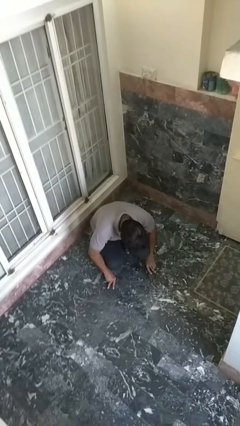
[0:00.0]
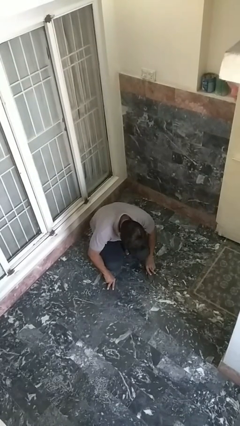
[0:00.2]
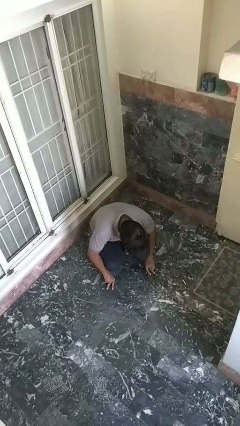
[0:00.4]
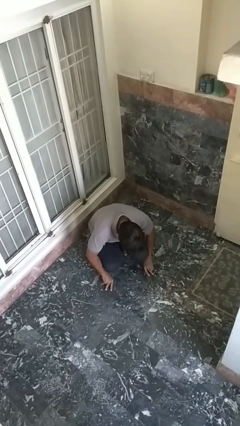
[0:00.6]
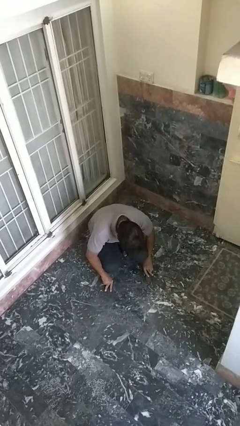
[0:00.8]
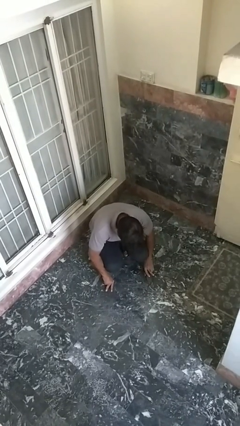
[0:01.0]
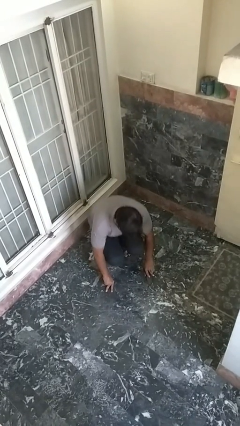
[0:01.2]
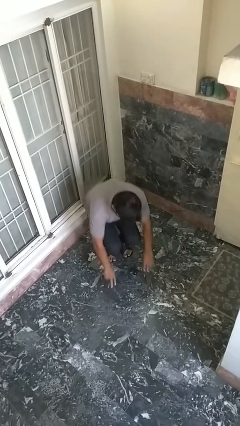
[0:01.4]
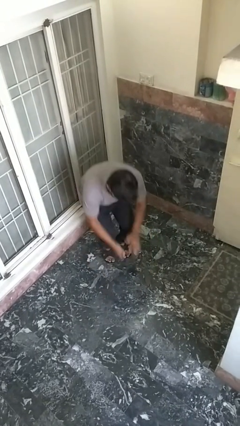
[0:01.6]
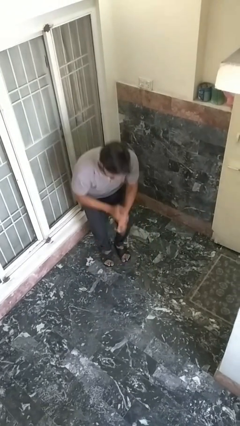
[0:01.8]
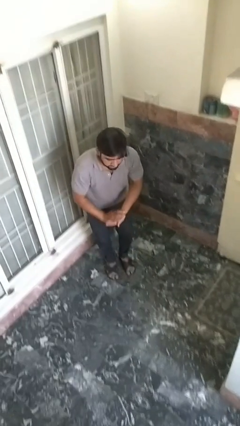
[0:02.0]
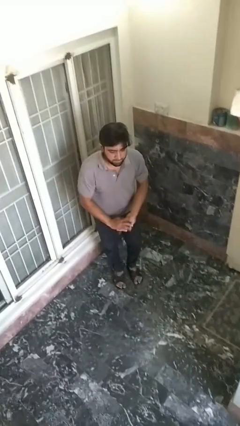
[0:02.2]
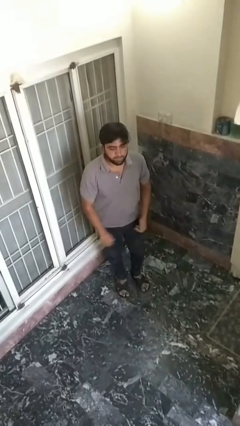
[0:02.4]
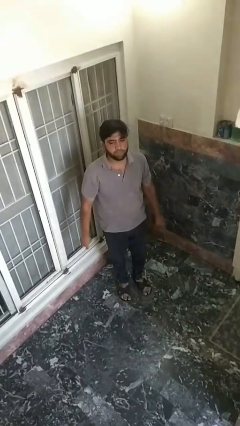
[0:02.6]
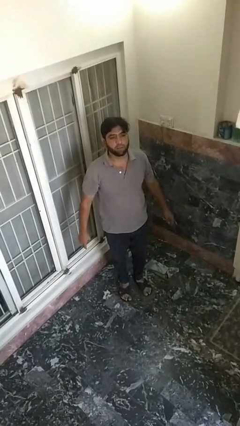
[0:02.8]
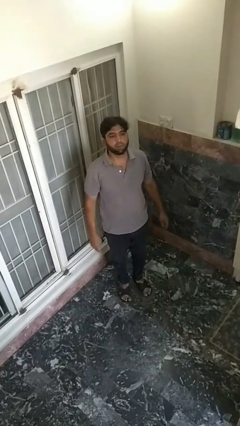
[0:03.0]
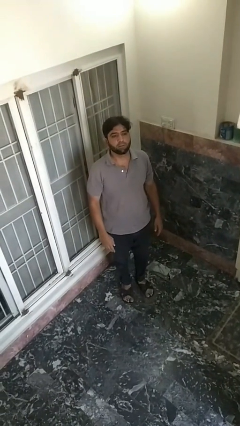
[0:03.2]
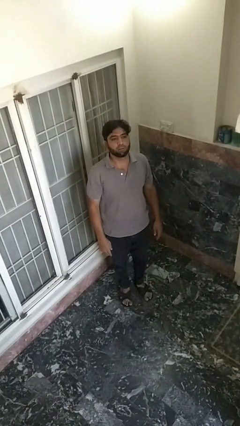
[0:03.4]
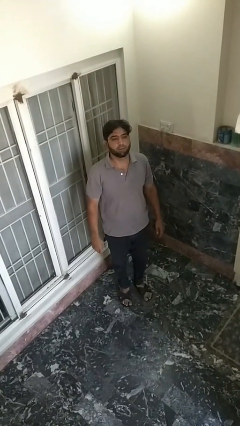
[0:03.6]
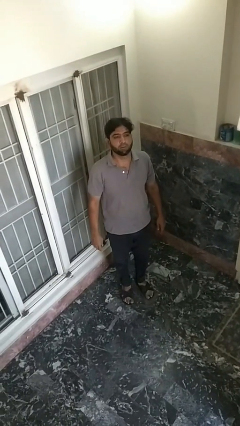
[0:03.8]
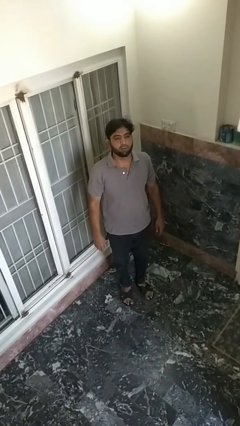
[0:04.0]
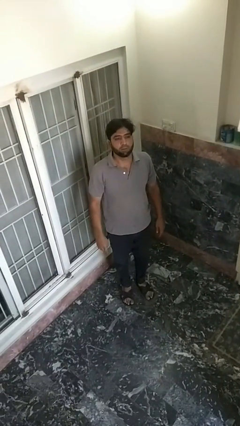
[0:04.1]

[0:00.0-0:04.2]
person stands up from floor

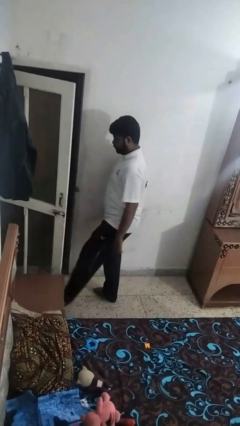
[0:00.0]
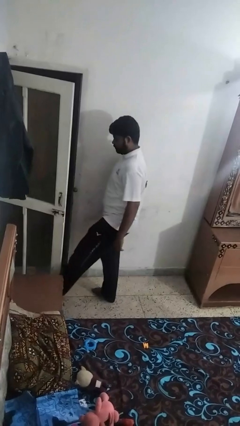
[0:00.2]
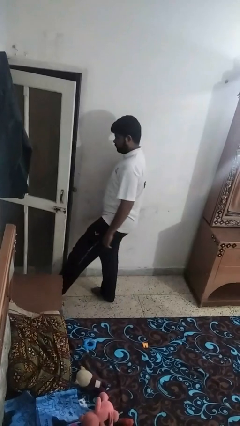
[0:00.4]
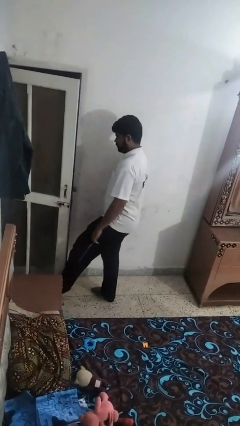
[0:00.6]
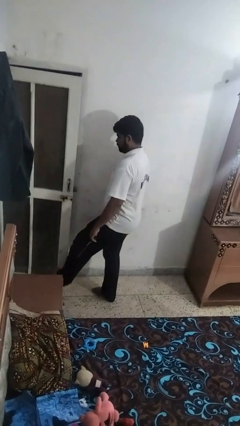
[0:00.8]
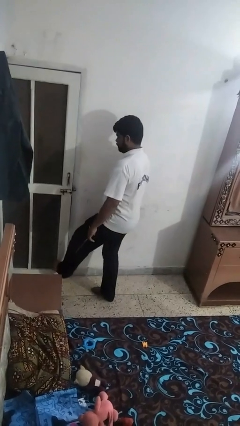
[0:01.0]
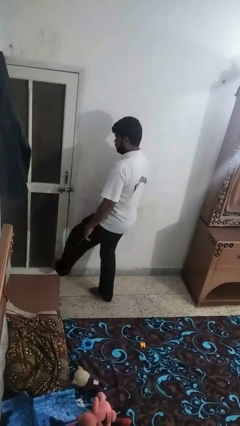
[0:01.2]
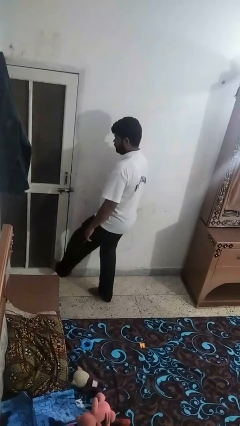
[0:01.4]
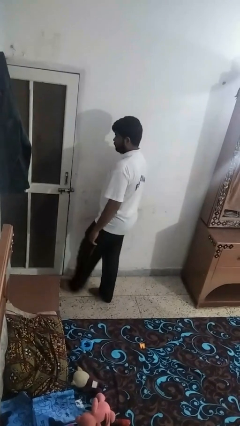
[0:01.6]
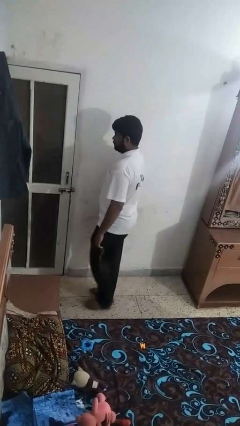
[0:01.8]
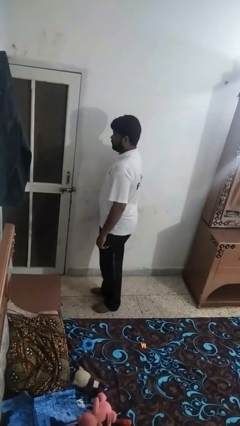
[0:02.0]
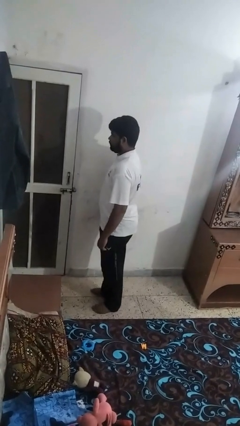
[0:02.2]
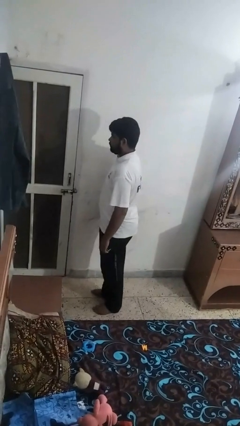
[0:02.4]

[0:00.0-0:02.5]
person closes door with foot

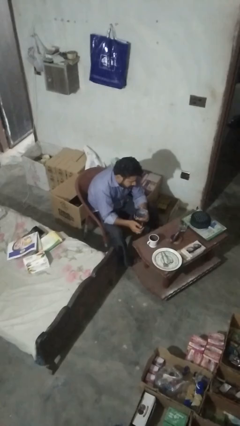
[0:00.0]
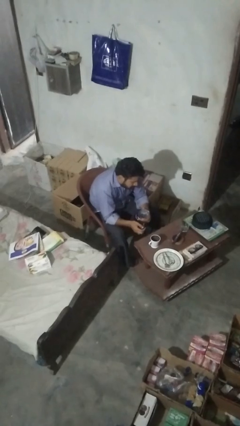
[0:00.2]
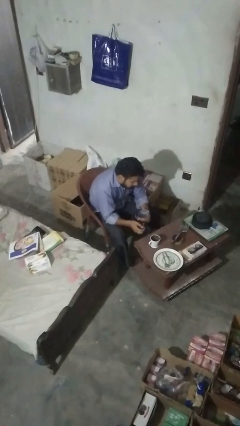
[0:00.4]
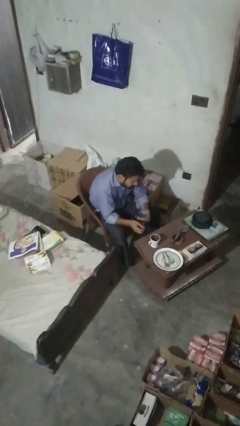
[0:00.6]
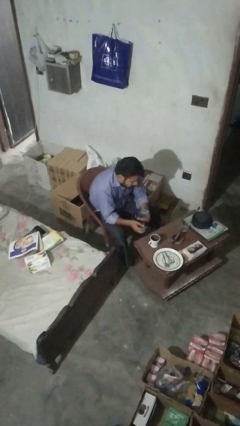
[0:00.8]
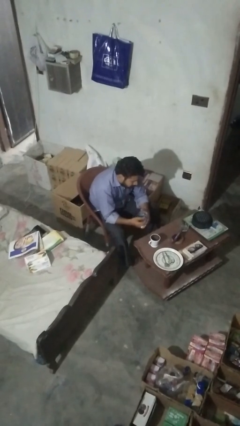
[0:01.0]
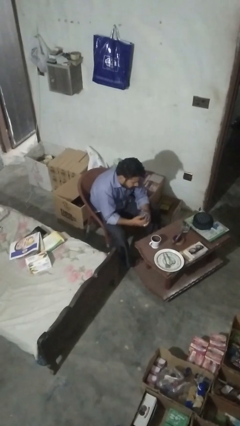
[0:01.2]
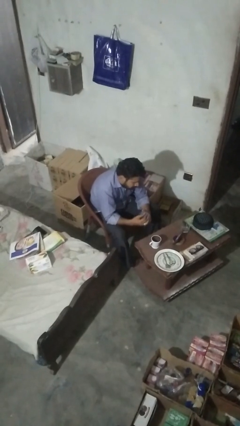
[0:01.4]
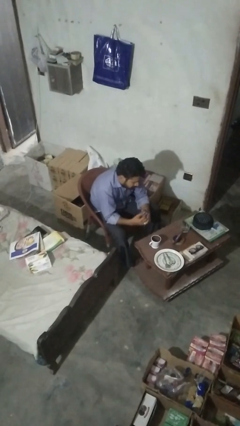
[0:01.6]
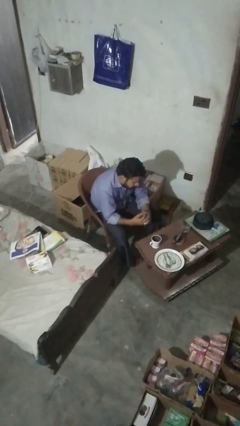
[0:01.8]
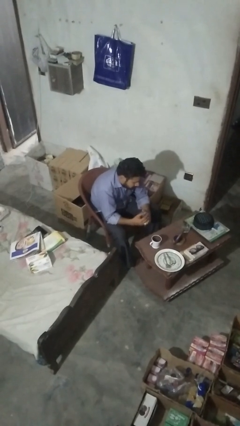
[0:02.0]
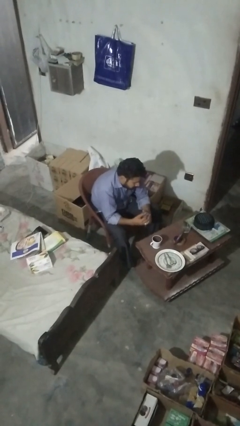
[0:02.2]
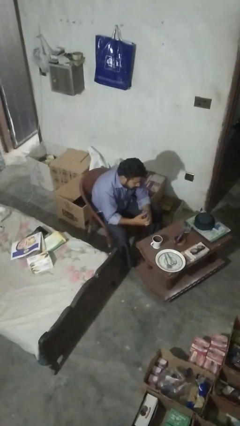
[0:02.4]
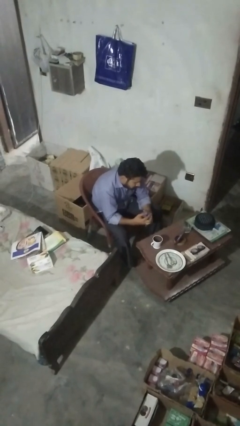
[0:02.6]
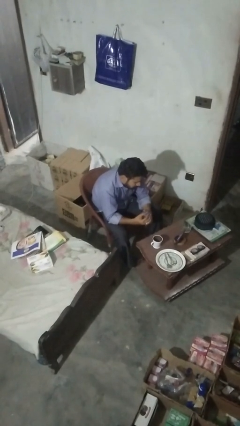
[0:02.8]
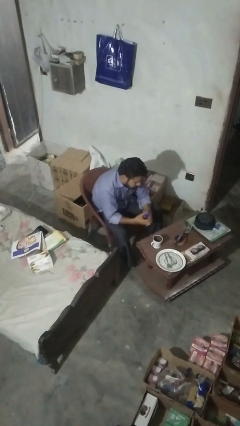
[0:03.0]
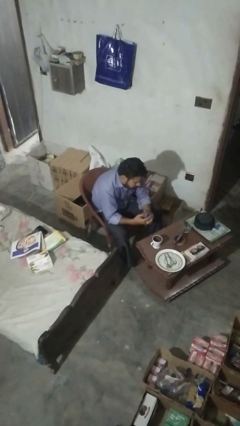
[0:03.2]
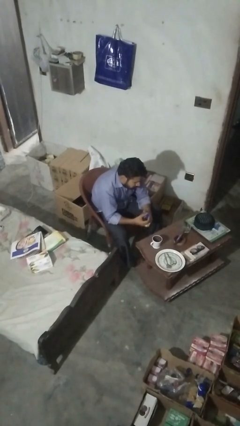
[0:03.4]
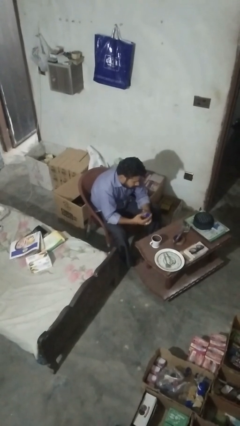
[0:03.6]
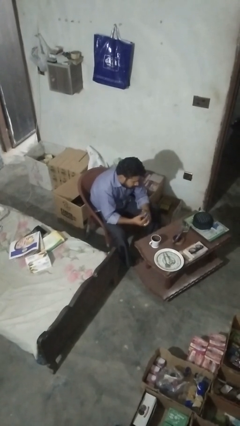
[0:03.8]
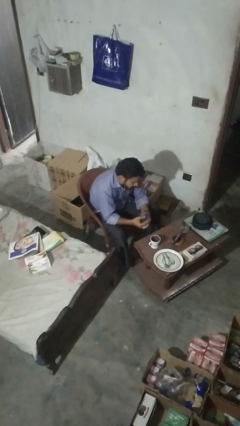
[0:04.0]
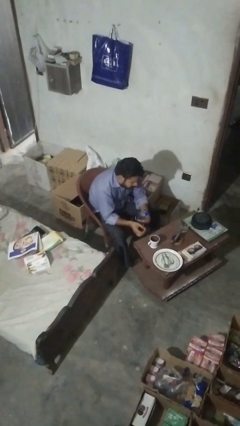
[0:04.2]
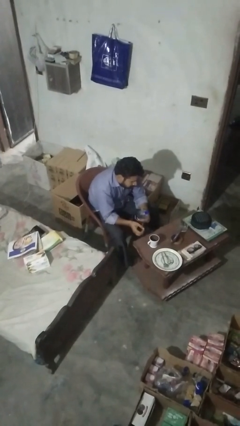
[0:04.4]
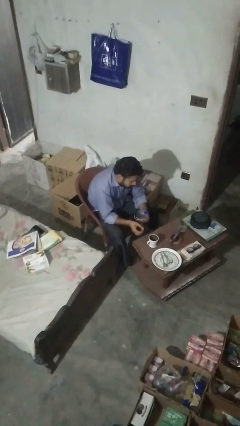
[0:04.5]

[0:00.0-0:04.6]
person screws lid to bottle

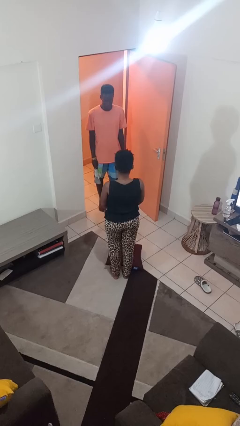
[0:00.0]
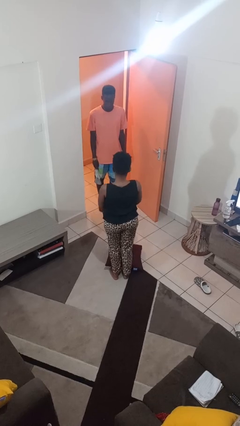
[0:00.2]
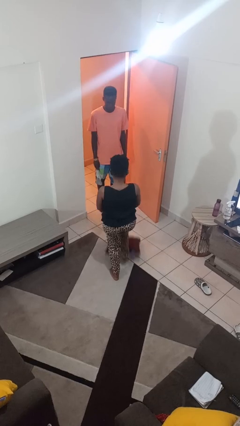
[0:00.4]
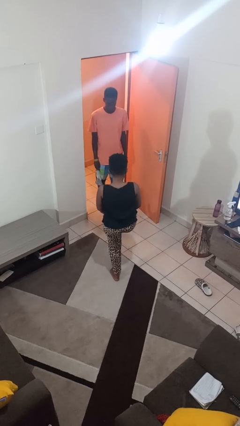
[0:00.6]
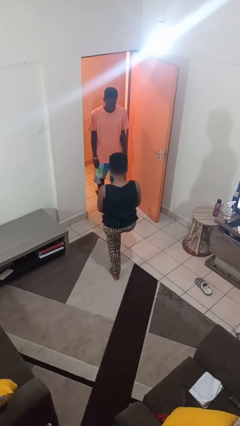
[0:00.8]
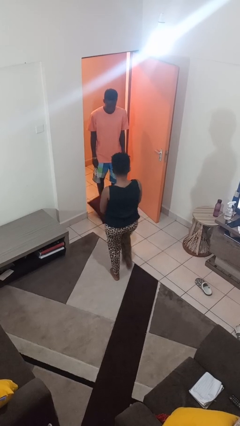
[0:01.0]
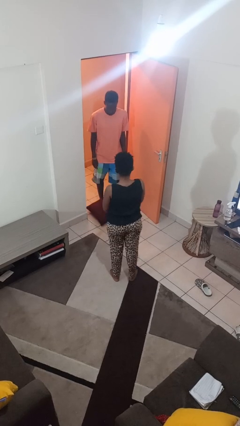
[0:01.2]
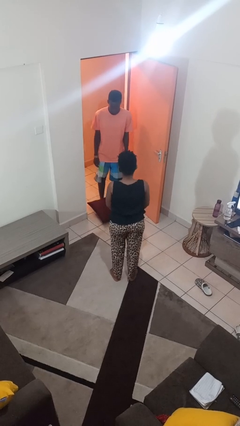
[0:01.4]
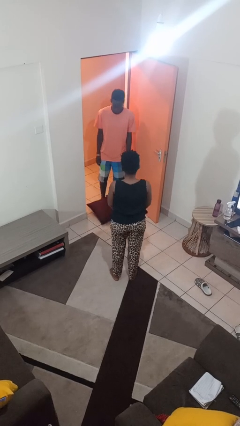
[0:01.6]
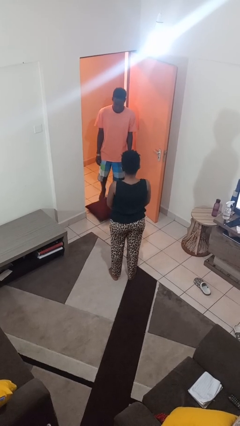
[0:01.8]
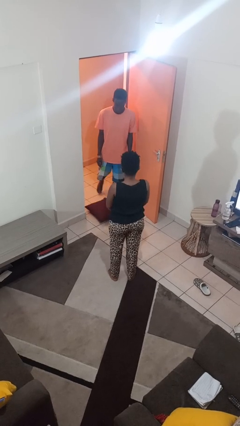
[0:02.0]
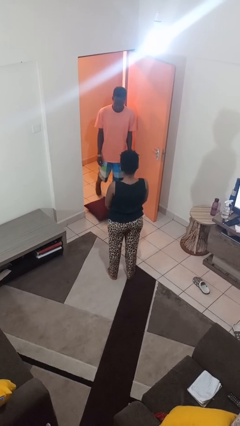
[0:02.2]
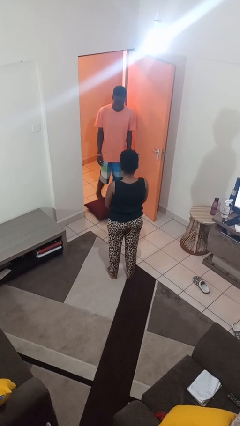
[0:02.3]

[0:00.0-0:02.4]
person kicks object to person

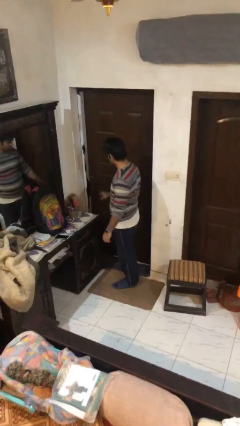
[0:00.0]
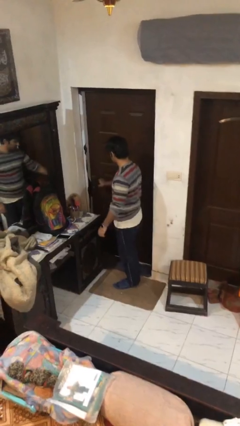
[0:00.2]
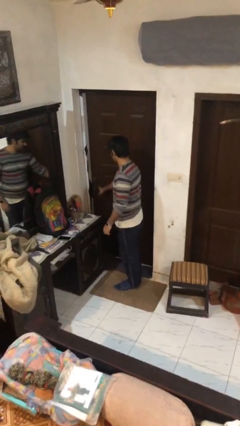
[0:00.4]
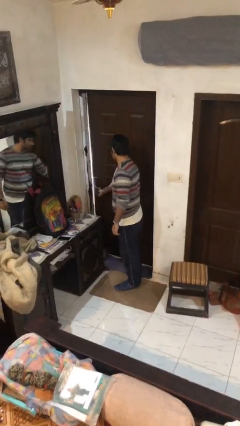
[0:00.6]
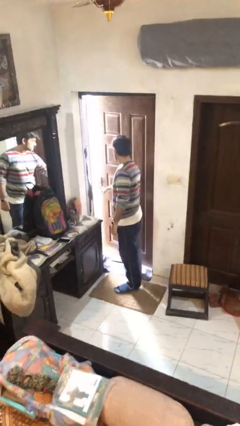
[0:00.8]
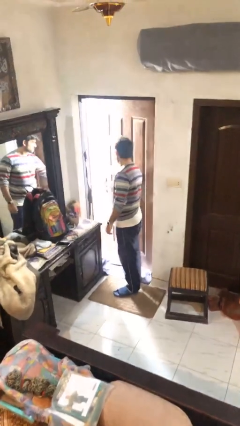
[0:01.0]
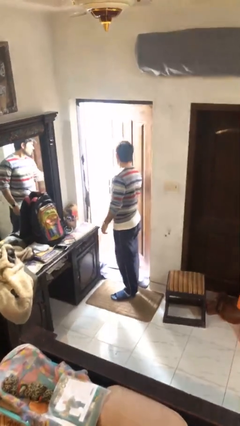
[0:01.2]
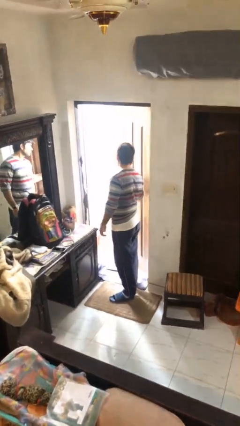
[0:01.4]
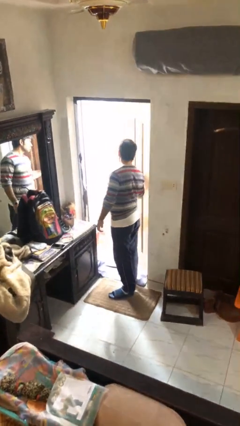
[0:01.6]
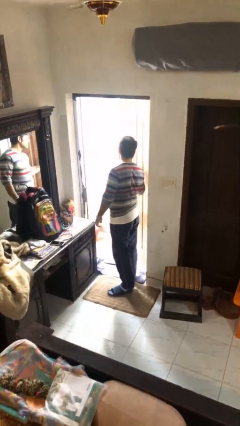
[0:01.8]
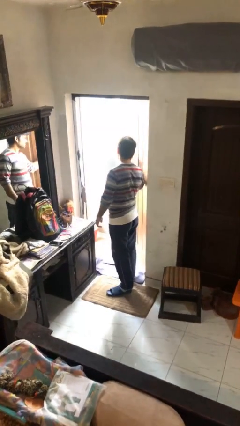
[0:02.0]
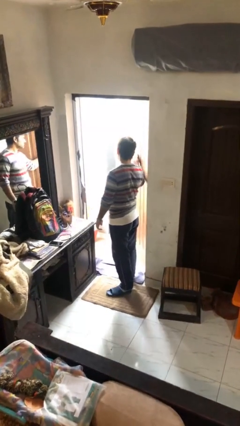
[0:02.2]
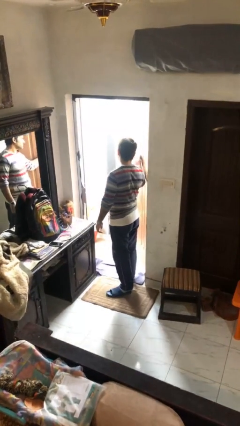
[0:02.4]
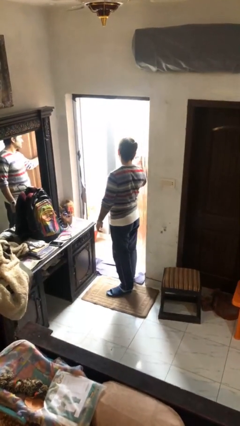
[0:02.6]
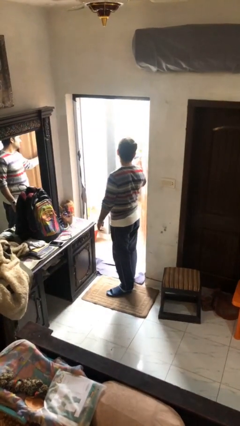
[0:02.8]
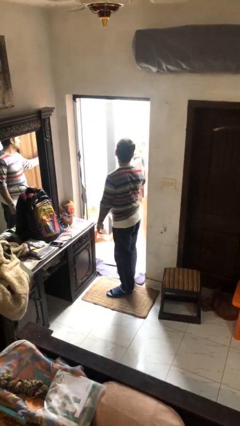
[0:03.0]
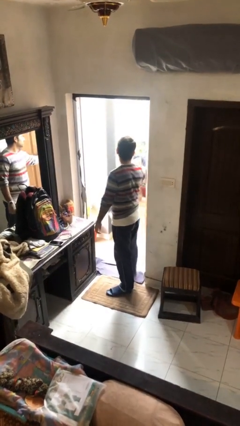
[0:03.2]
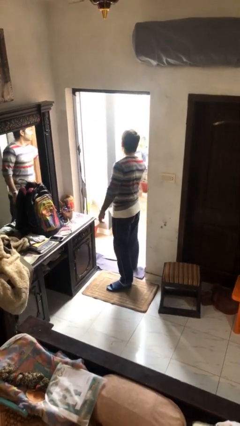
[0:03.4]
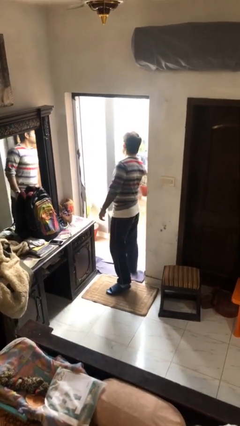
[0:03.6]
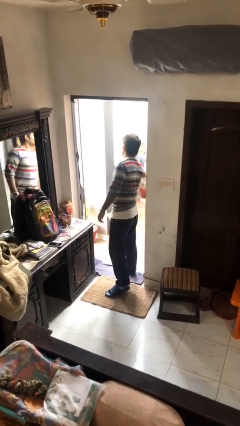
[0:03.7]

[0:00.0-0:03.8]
person opens facility door
